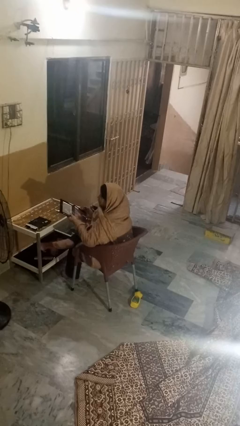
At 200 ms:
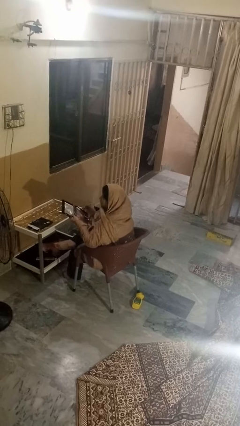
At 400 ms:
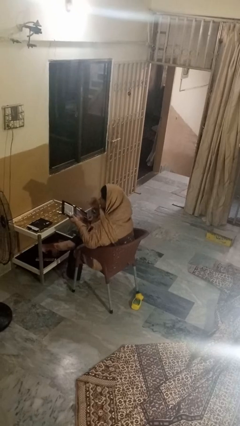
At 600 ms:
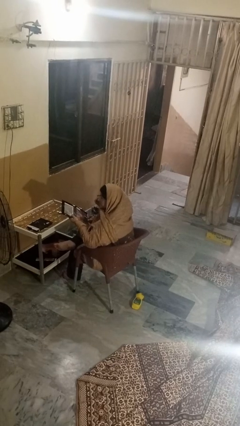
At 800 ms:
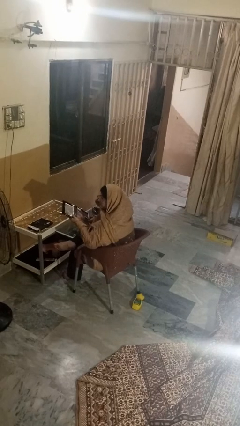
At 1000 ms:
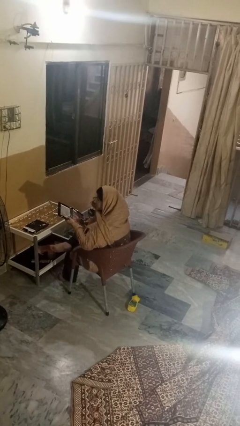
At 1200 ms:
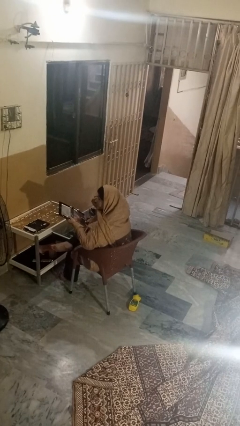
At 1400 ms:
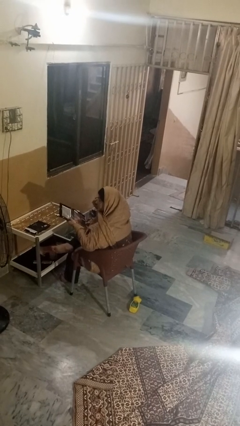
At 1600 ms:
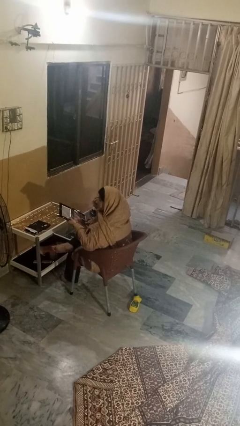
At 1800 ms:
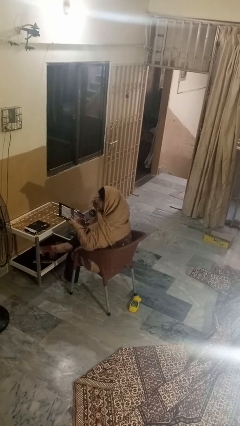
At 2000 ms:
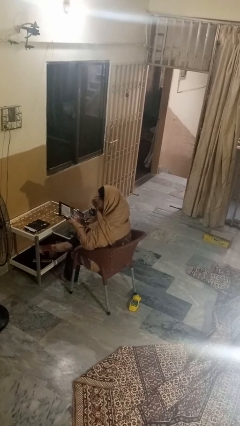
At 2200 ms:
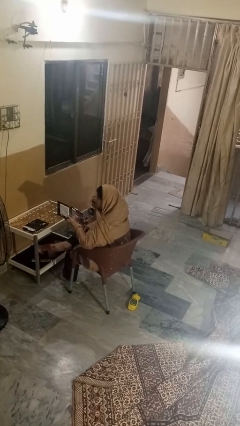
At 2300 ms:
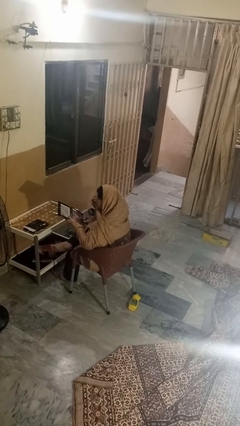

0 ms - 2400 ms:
person applies eye makeup

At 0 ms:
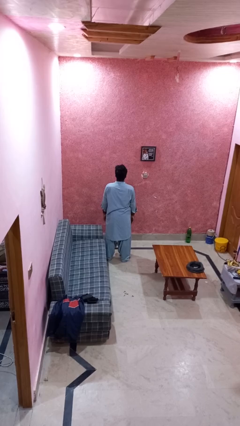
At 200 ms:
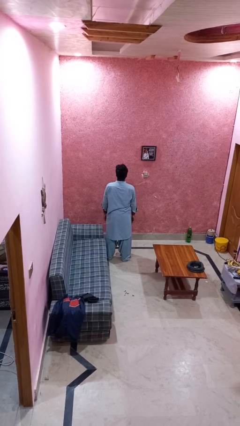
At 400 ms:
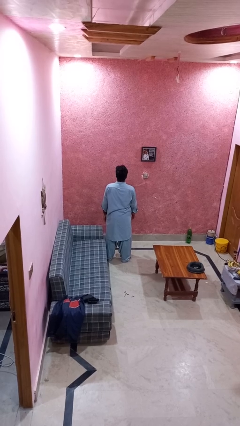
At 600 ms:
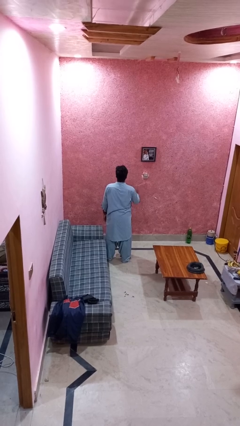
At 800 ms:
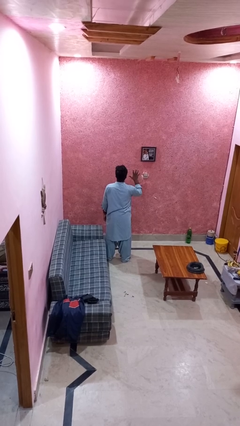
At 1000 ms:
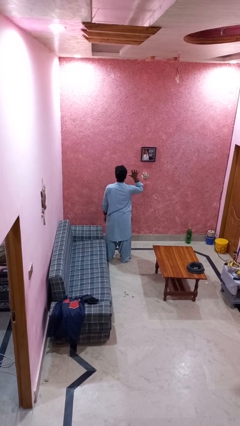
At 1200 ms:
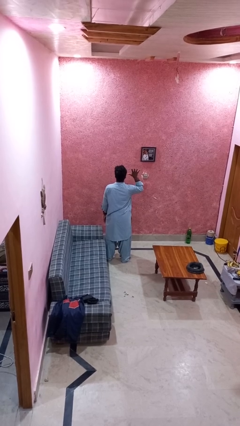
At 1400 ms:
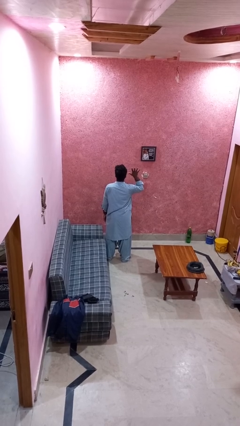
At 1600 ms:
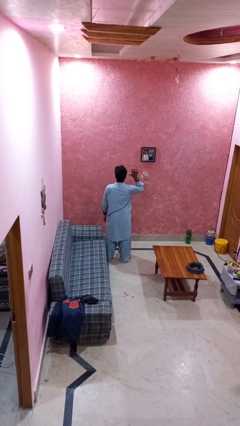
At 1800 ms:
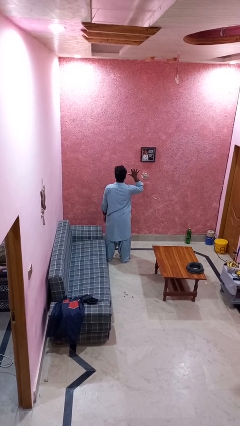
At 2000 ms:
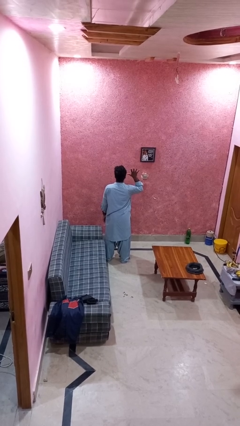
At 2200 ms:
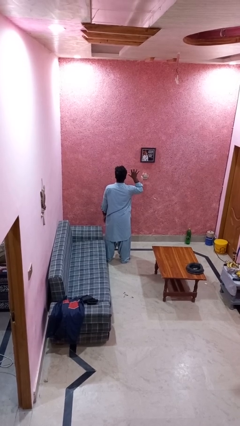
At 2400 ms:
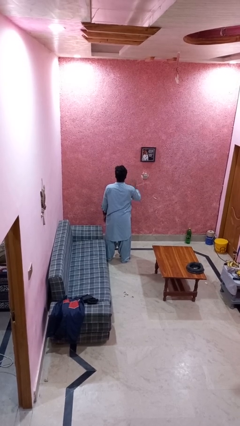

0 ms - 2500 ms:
person gestures number five

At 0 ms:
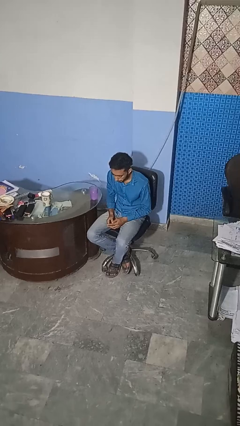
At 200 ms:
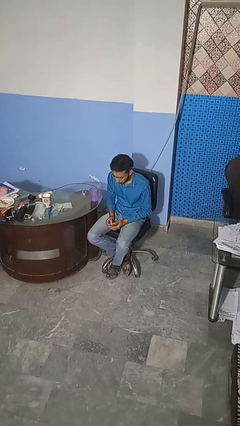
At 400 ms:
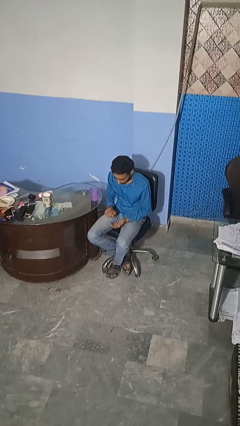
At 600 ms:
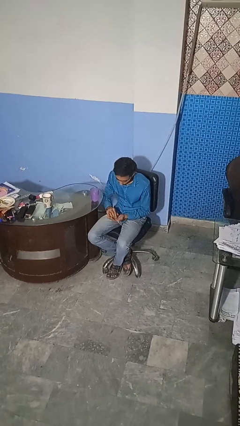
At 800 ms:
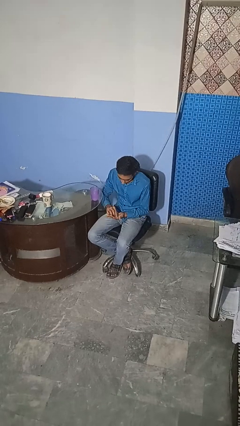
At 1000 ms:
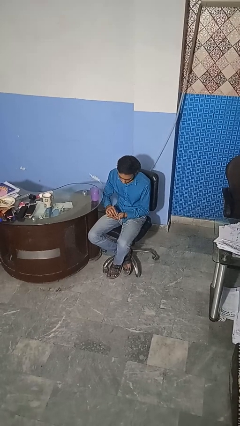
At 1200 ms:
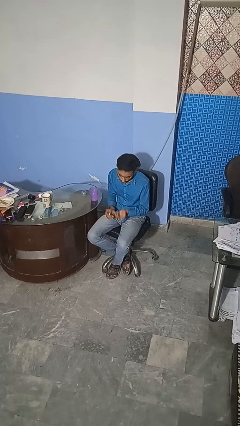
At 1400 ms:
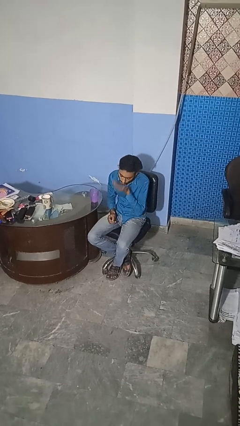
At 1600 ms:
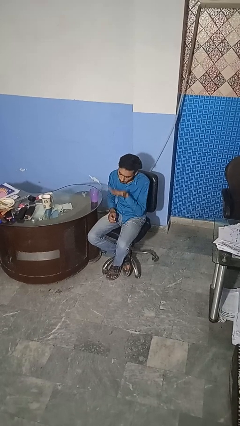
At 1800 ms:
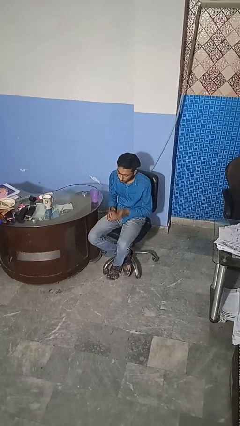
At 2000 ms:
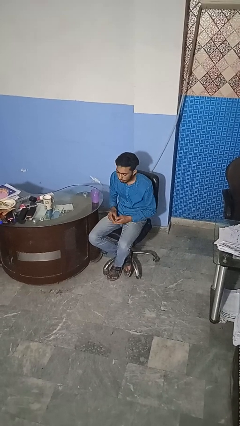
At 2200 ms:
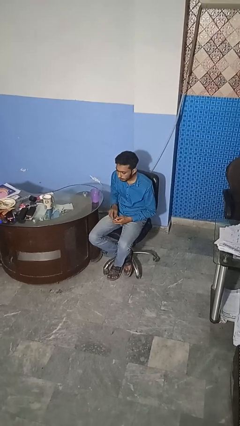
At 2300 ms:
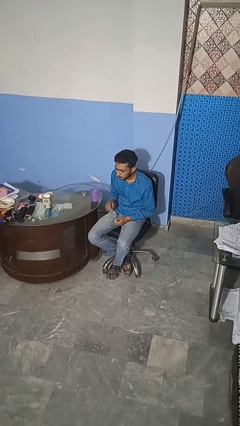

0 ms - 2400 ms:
person takes medicine pills

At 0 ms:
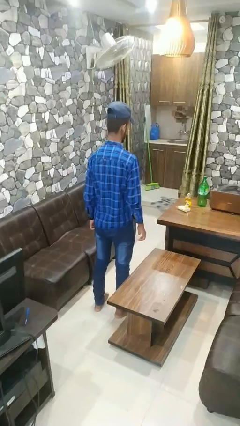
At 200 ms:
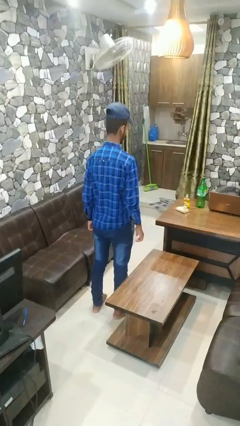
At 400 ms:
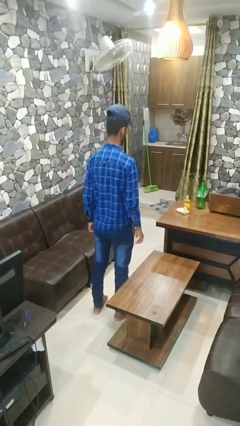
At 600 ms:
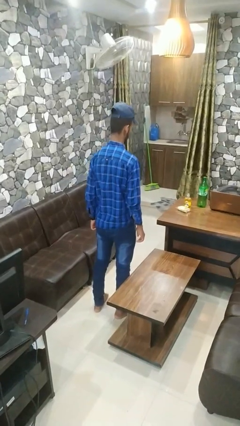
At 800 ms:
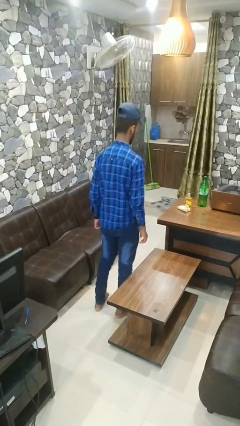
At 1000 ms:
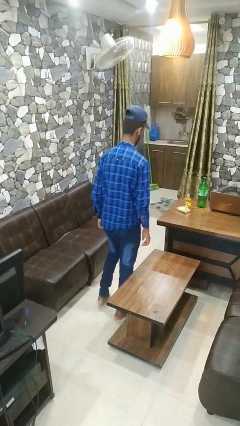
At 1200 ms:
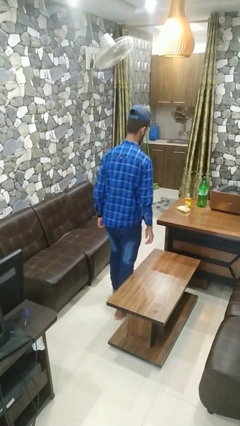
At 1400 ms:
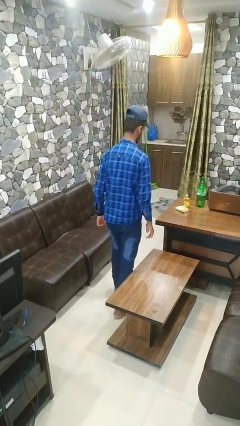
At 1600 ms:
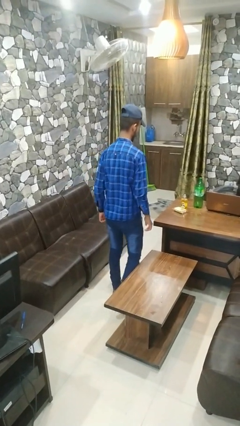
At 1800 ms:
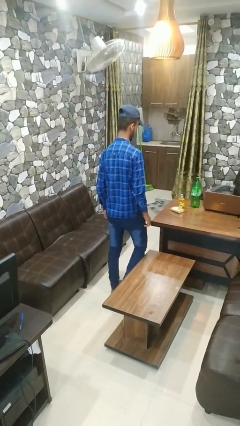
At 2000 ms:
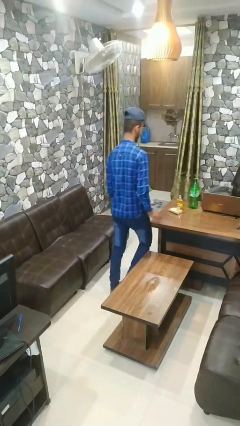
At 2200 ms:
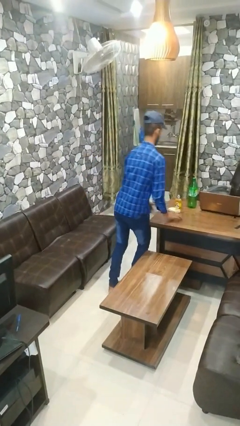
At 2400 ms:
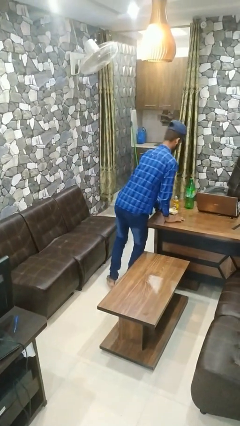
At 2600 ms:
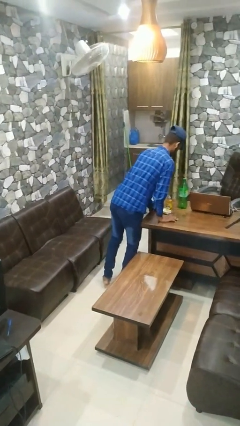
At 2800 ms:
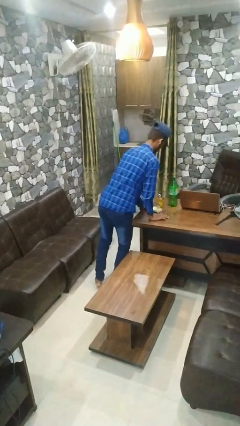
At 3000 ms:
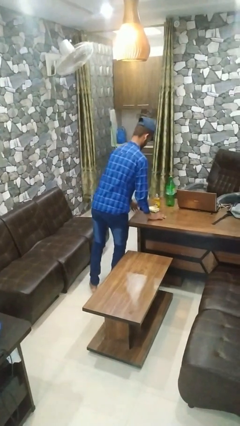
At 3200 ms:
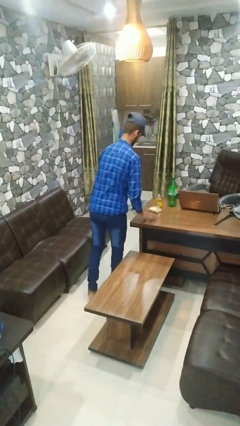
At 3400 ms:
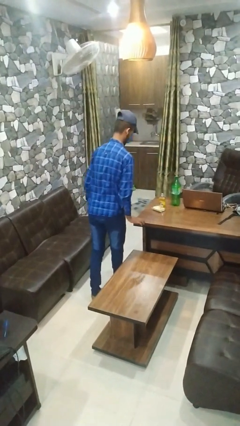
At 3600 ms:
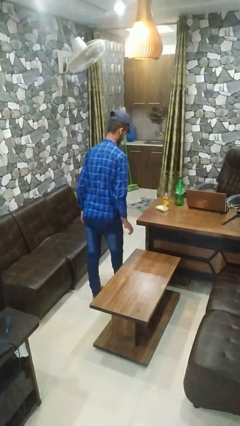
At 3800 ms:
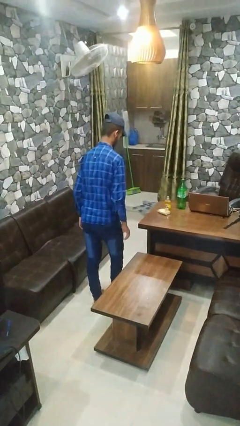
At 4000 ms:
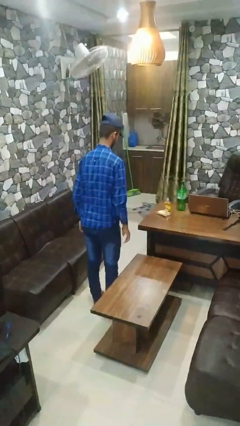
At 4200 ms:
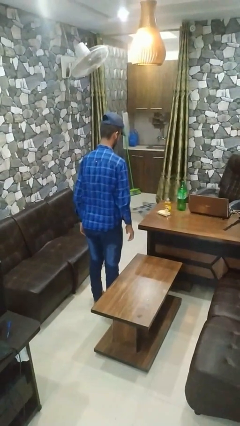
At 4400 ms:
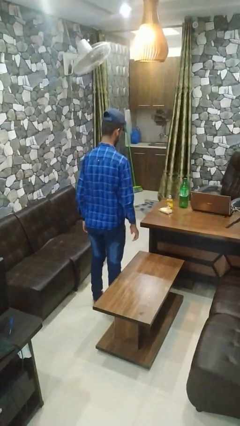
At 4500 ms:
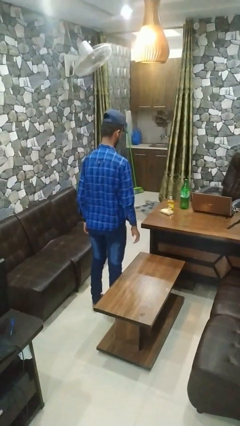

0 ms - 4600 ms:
person bumps into table

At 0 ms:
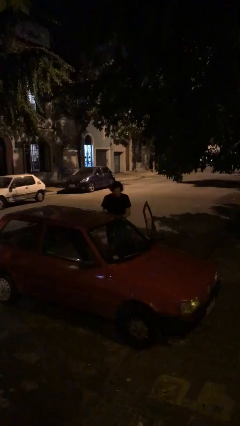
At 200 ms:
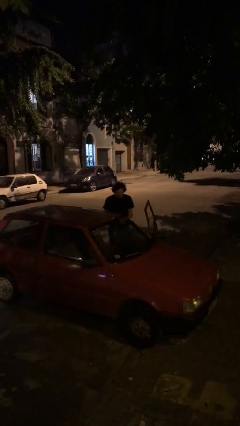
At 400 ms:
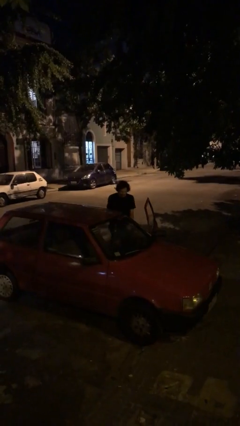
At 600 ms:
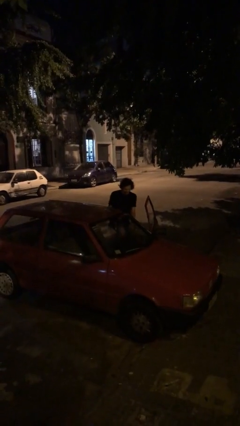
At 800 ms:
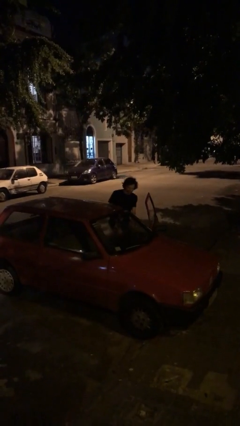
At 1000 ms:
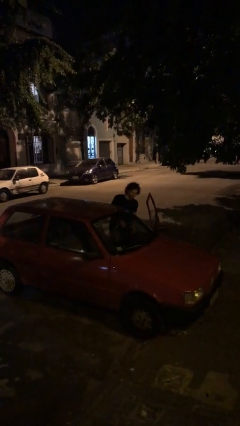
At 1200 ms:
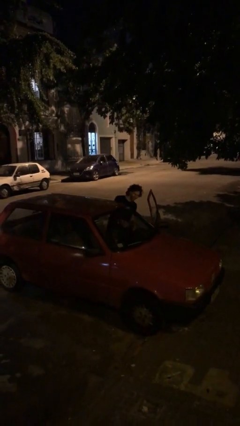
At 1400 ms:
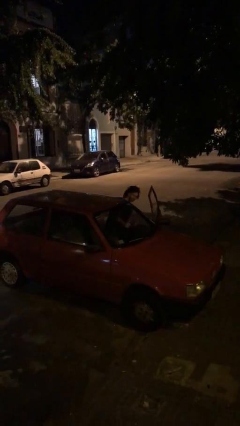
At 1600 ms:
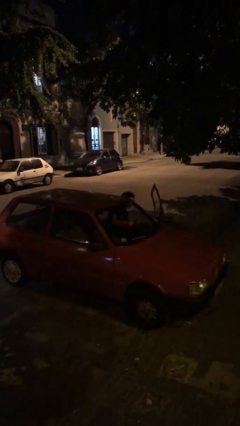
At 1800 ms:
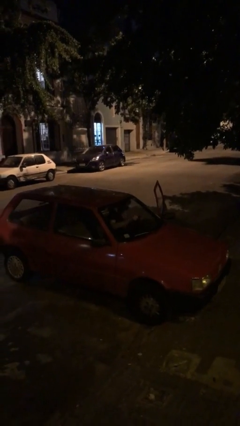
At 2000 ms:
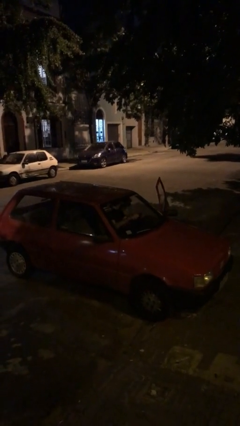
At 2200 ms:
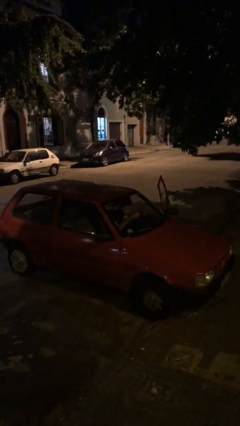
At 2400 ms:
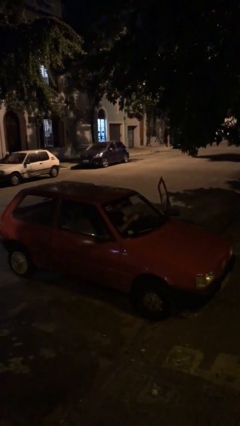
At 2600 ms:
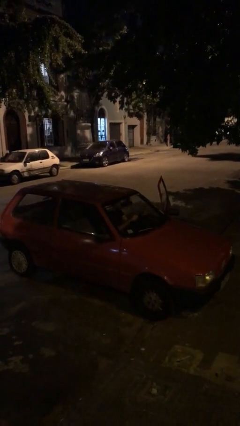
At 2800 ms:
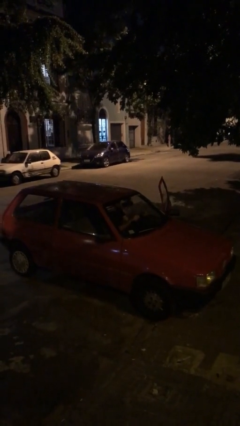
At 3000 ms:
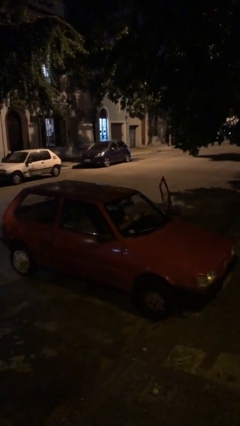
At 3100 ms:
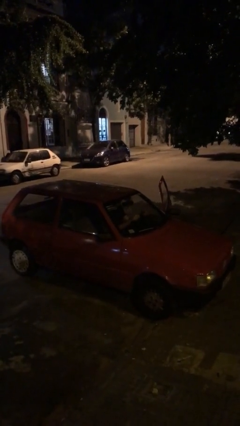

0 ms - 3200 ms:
person enters car

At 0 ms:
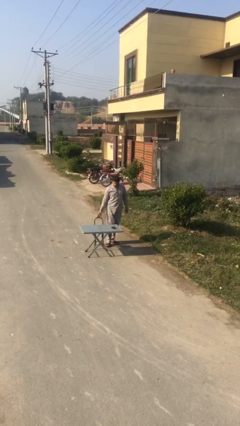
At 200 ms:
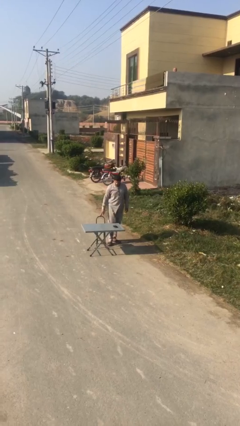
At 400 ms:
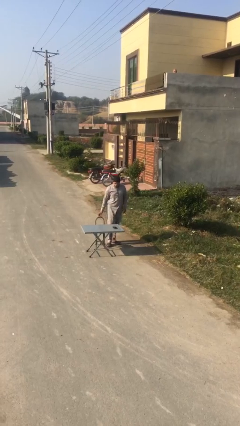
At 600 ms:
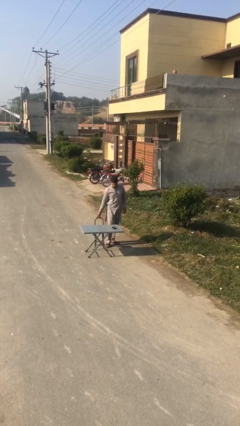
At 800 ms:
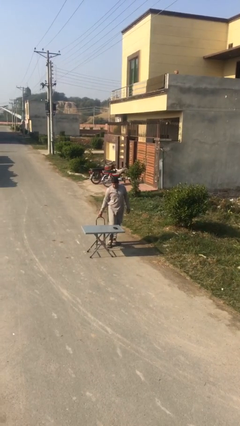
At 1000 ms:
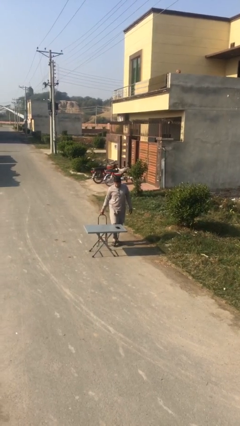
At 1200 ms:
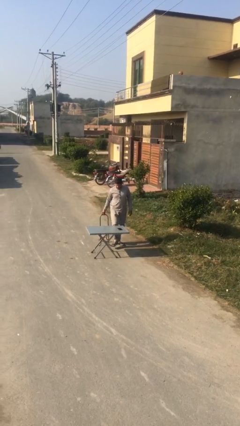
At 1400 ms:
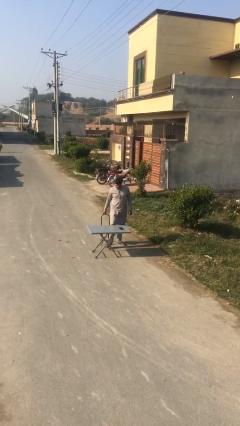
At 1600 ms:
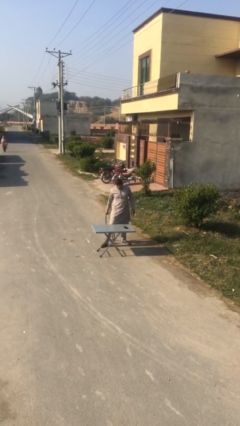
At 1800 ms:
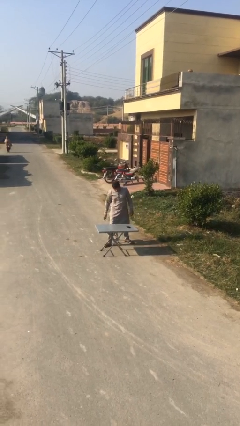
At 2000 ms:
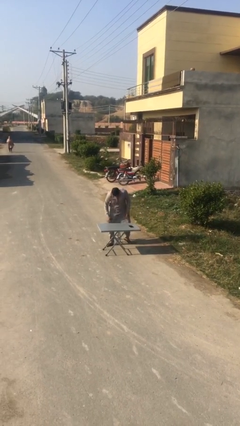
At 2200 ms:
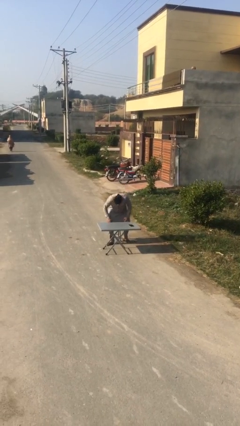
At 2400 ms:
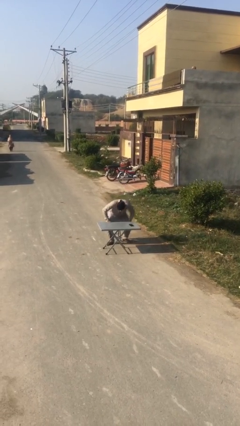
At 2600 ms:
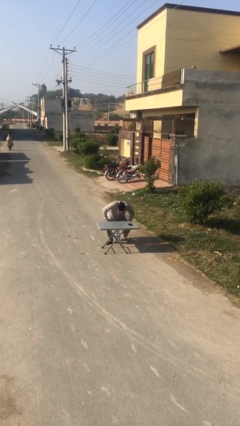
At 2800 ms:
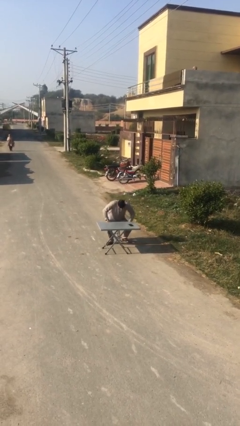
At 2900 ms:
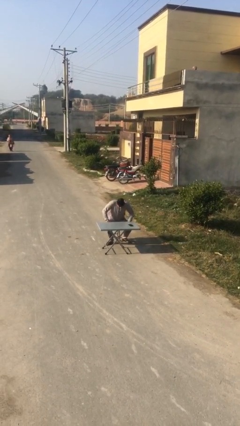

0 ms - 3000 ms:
person sits down
